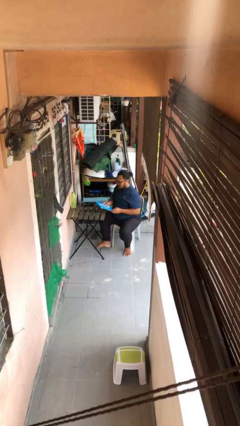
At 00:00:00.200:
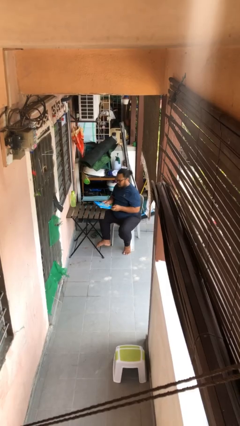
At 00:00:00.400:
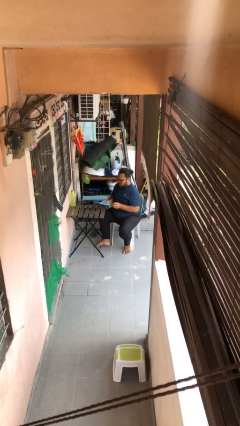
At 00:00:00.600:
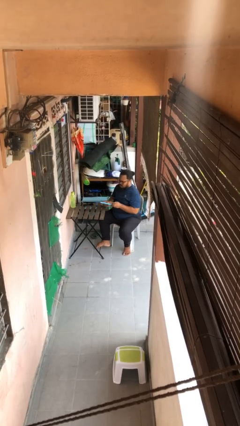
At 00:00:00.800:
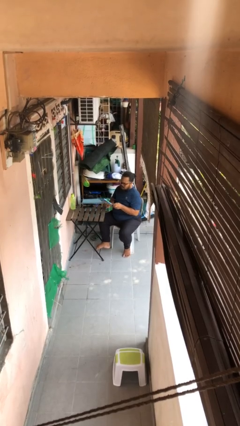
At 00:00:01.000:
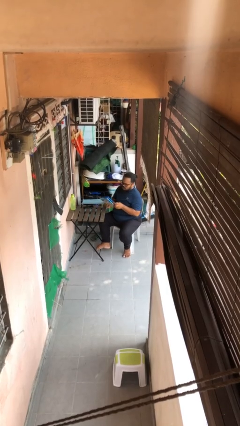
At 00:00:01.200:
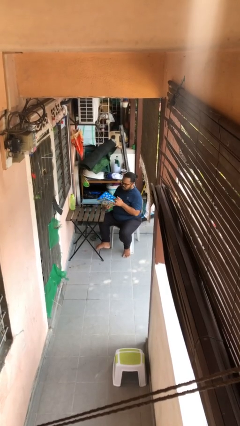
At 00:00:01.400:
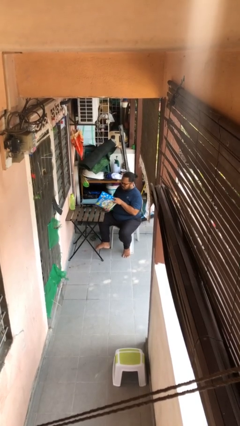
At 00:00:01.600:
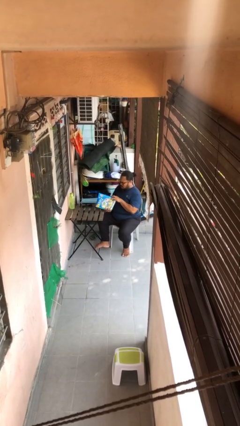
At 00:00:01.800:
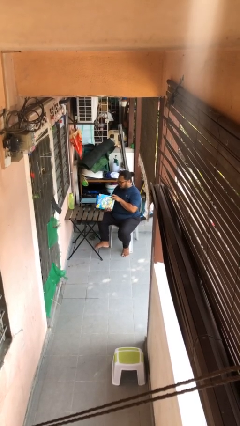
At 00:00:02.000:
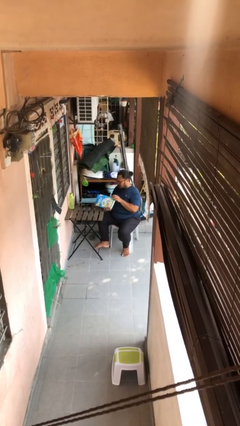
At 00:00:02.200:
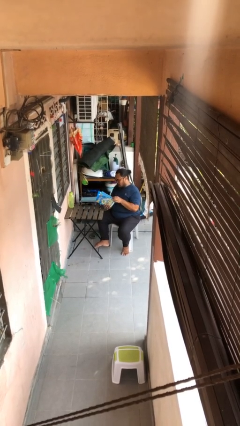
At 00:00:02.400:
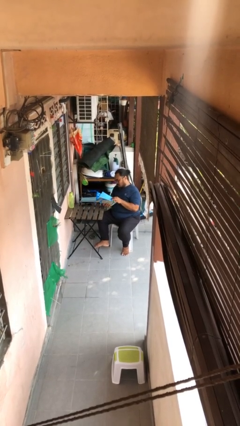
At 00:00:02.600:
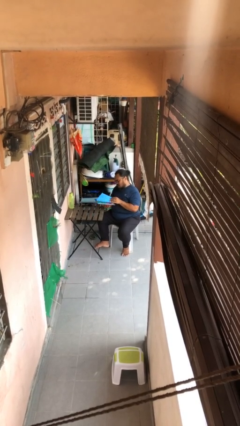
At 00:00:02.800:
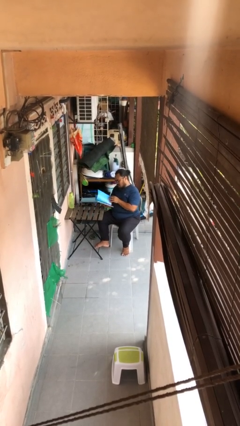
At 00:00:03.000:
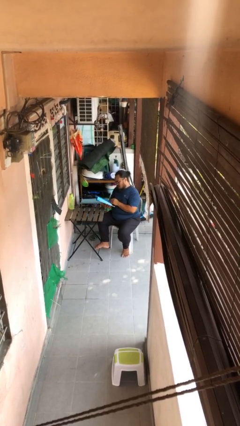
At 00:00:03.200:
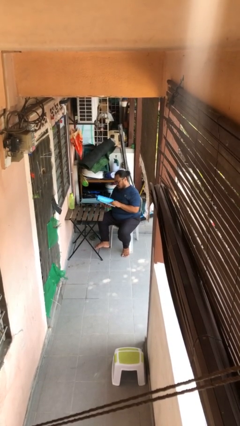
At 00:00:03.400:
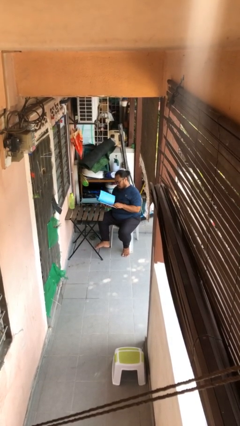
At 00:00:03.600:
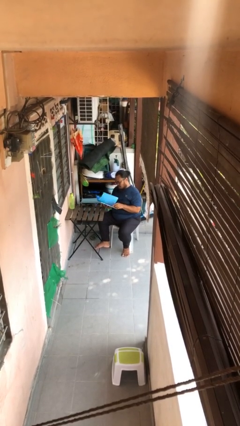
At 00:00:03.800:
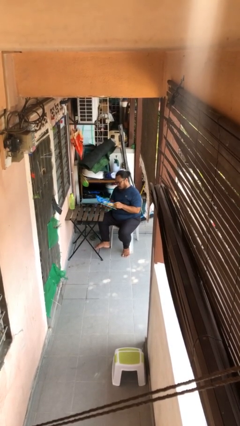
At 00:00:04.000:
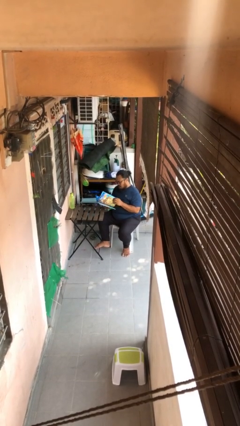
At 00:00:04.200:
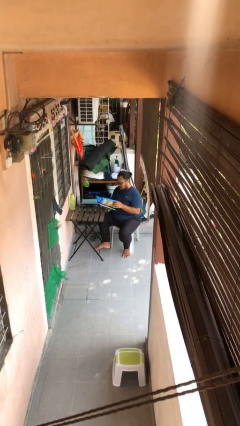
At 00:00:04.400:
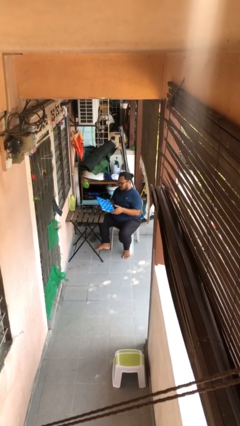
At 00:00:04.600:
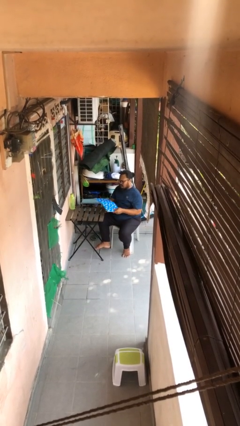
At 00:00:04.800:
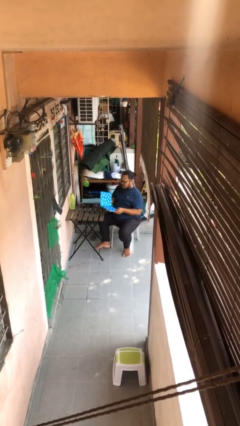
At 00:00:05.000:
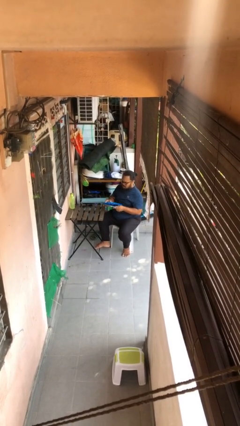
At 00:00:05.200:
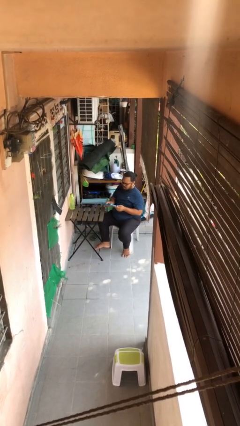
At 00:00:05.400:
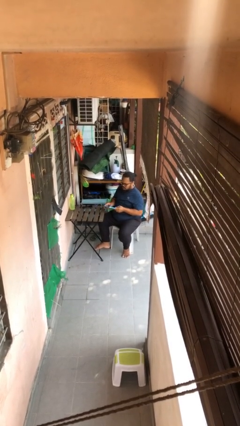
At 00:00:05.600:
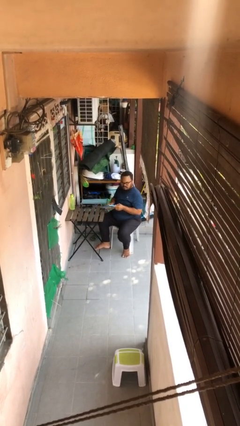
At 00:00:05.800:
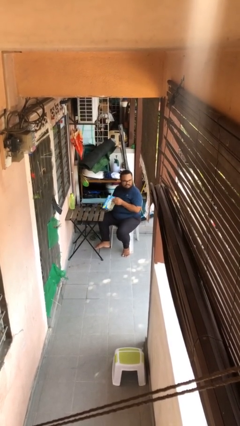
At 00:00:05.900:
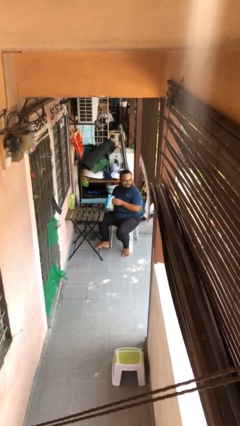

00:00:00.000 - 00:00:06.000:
person reads document

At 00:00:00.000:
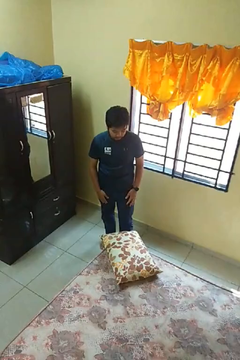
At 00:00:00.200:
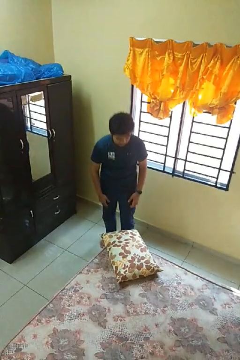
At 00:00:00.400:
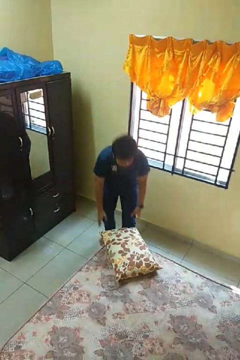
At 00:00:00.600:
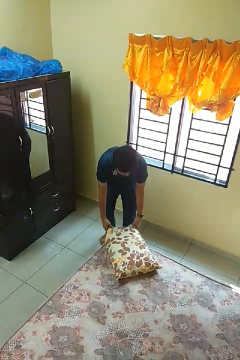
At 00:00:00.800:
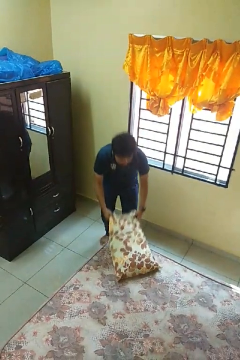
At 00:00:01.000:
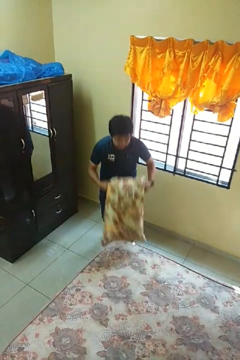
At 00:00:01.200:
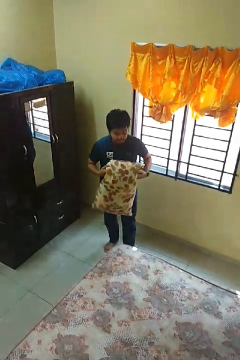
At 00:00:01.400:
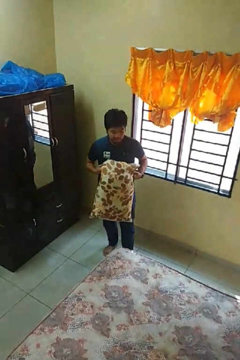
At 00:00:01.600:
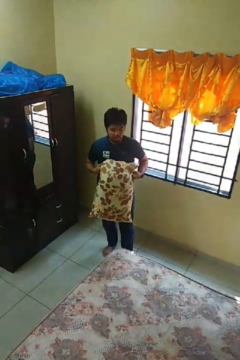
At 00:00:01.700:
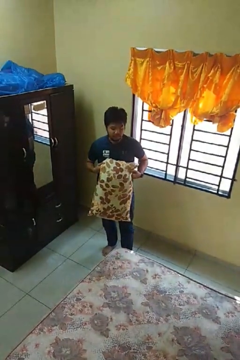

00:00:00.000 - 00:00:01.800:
person picks up object from bed

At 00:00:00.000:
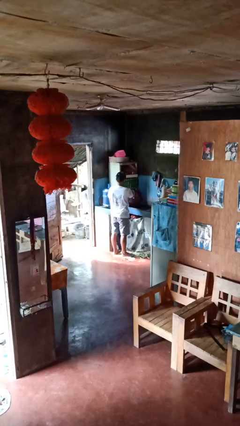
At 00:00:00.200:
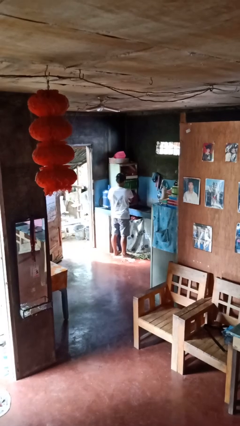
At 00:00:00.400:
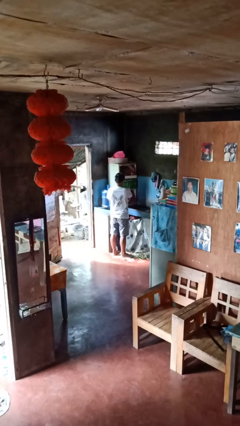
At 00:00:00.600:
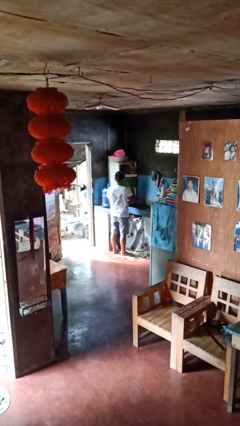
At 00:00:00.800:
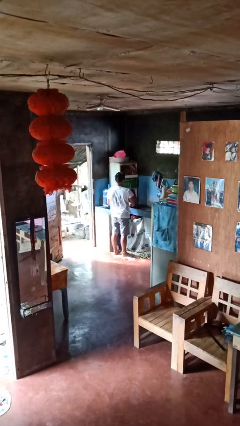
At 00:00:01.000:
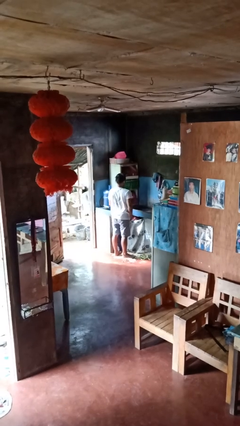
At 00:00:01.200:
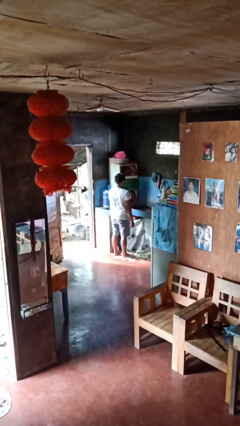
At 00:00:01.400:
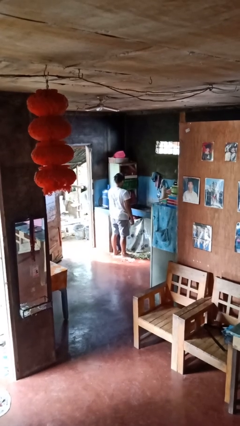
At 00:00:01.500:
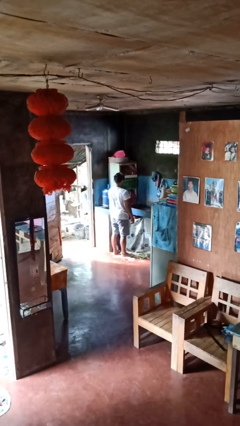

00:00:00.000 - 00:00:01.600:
person closes dishwasher

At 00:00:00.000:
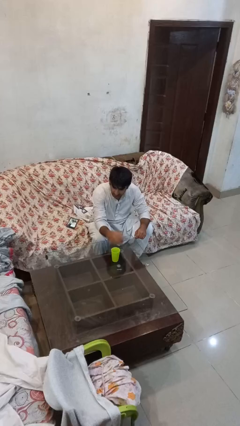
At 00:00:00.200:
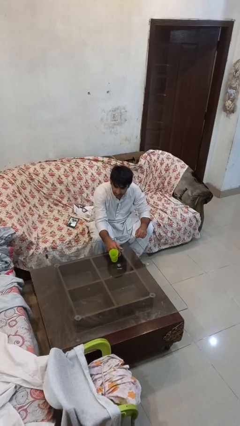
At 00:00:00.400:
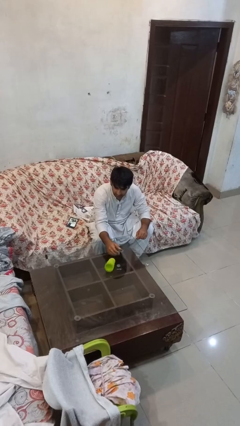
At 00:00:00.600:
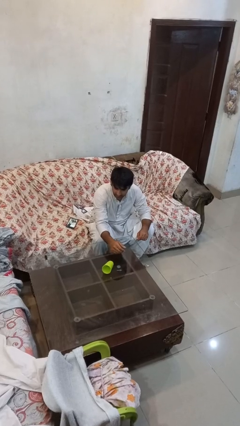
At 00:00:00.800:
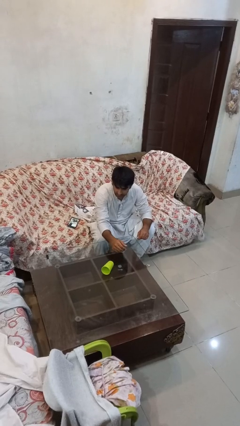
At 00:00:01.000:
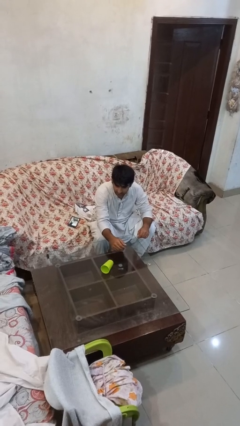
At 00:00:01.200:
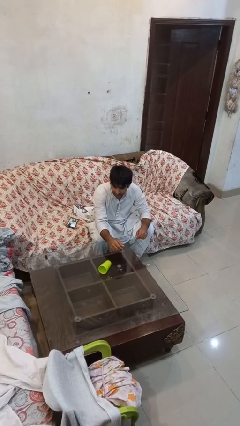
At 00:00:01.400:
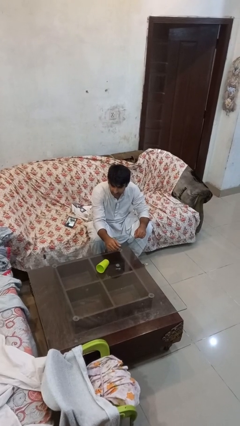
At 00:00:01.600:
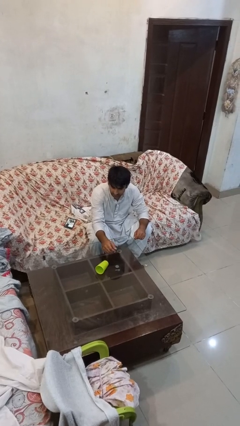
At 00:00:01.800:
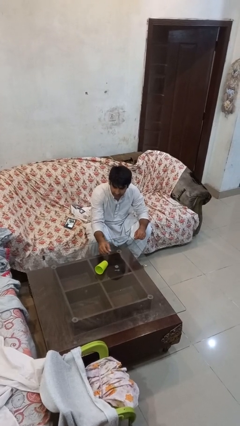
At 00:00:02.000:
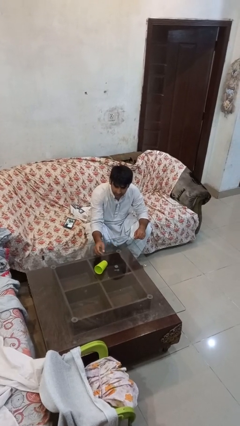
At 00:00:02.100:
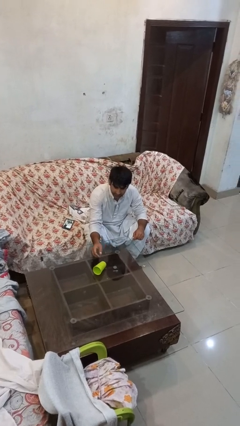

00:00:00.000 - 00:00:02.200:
person knocks over glass

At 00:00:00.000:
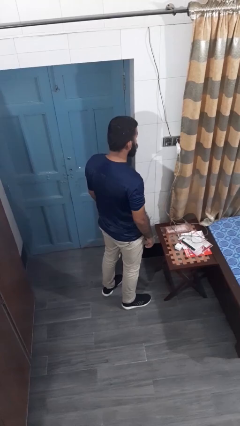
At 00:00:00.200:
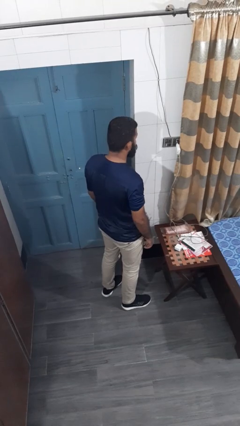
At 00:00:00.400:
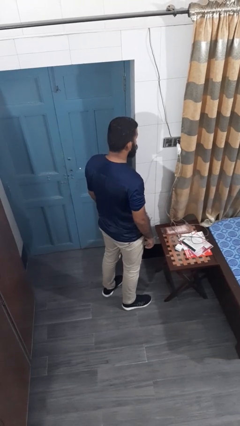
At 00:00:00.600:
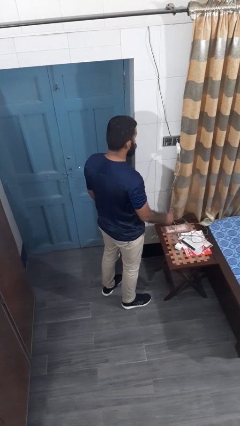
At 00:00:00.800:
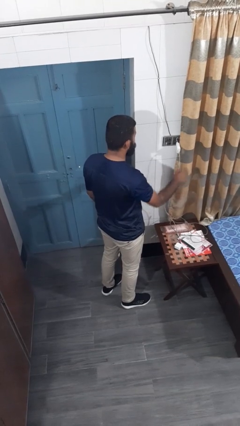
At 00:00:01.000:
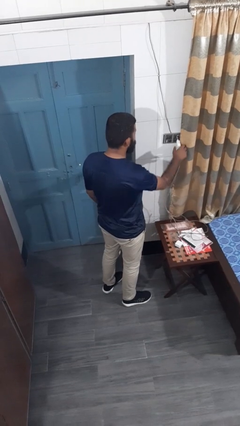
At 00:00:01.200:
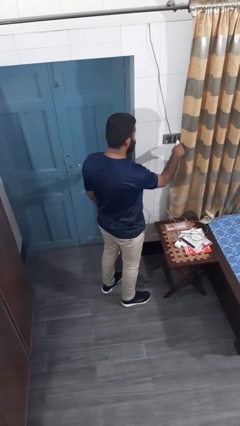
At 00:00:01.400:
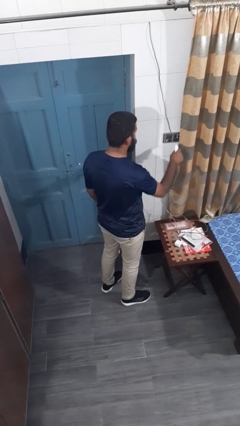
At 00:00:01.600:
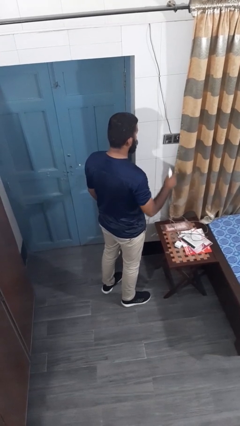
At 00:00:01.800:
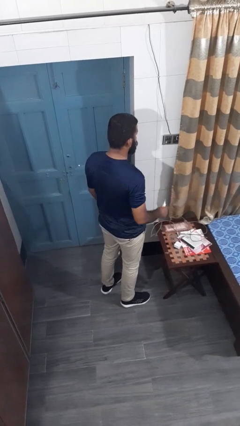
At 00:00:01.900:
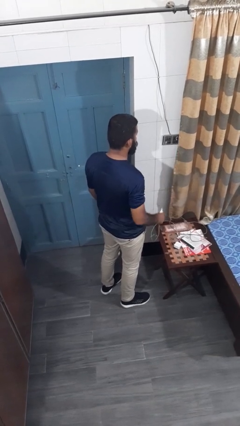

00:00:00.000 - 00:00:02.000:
person unplugs from electrical socket

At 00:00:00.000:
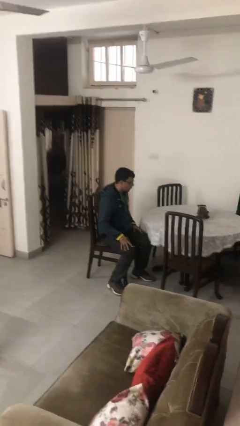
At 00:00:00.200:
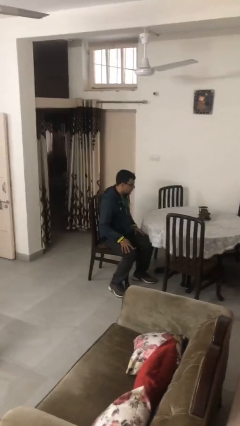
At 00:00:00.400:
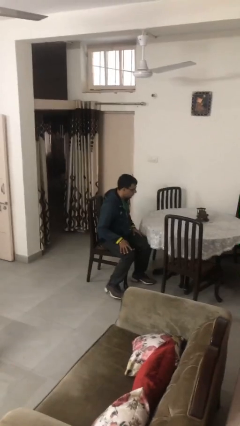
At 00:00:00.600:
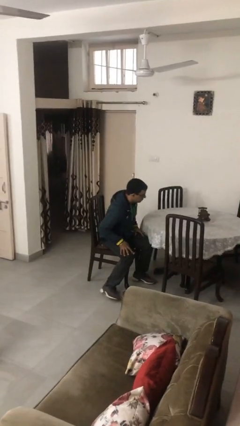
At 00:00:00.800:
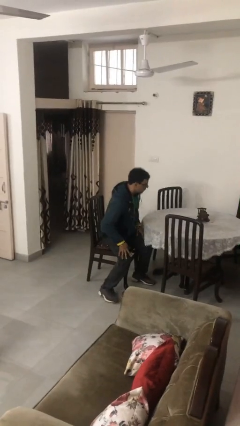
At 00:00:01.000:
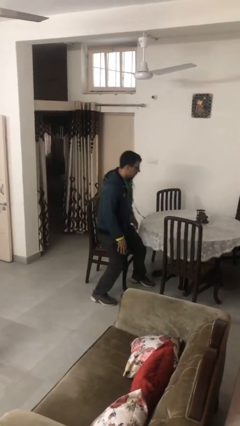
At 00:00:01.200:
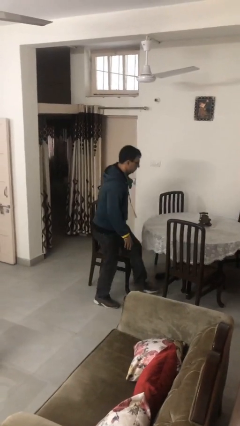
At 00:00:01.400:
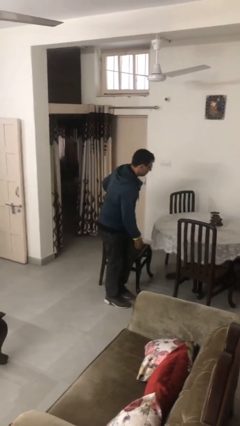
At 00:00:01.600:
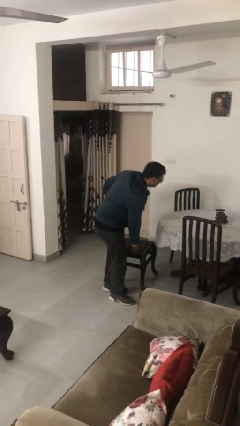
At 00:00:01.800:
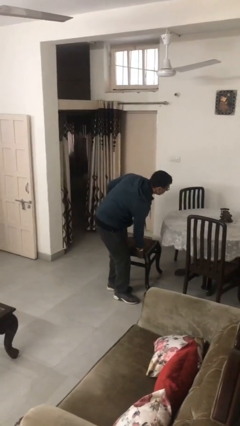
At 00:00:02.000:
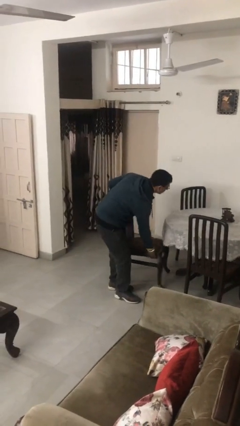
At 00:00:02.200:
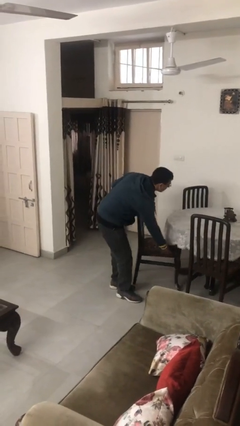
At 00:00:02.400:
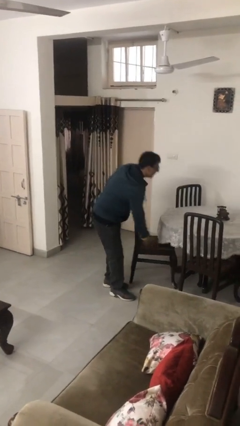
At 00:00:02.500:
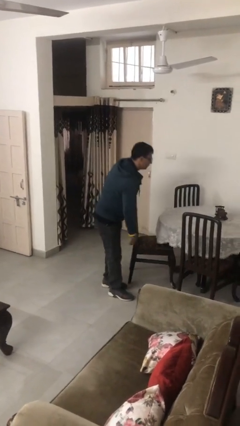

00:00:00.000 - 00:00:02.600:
person stands up

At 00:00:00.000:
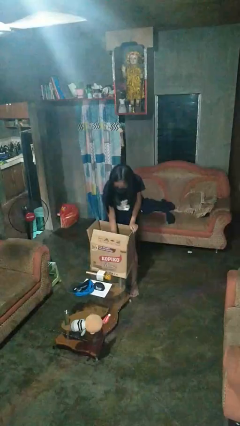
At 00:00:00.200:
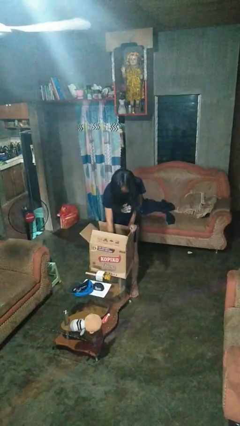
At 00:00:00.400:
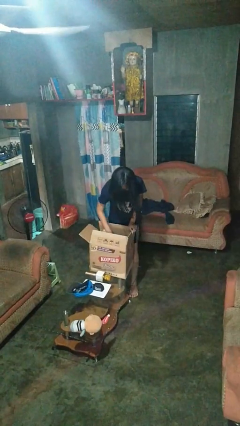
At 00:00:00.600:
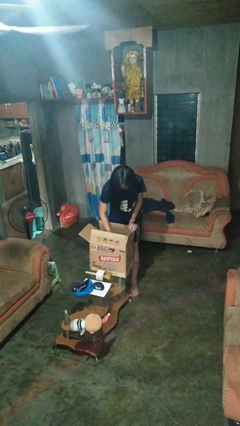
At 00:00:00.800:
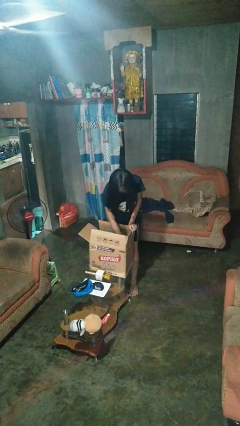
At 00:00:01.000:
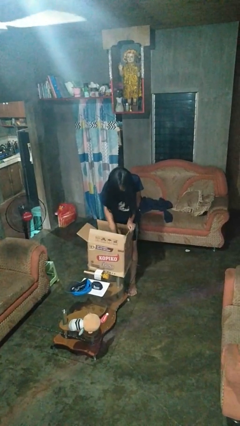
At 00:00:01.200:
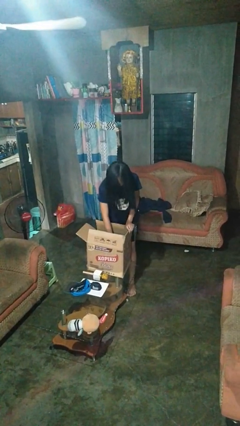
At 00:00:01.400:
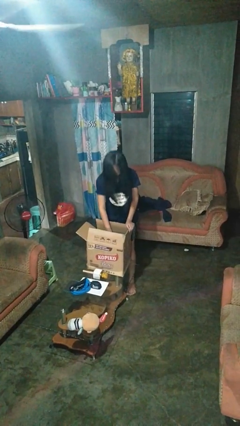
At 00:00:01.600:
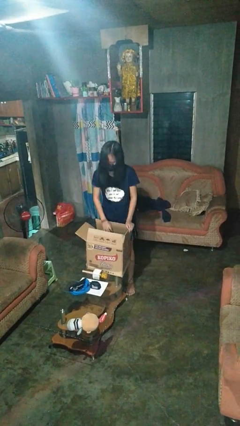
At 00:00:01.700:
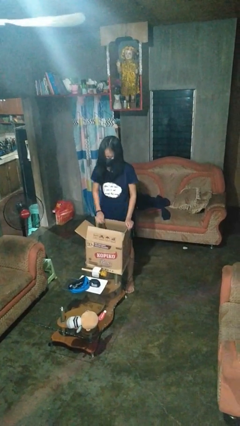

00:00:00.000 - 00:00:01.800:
person searches in box
